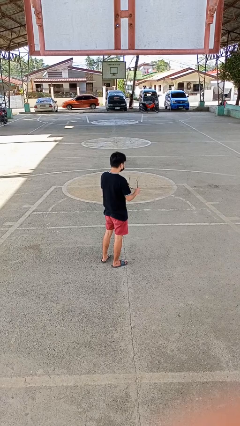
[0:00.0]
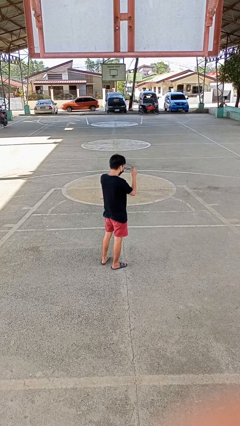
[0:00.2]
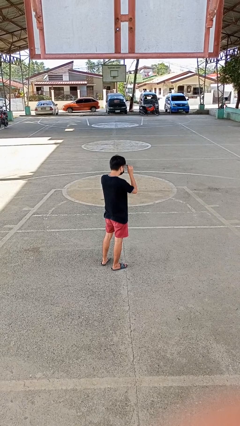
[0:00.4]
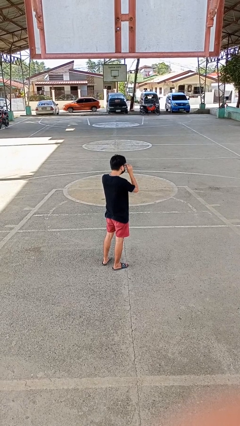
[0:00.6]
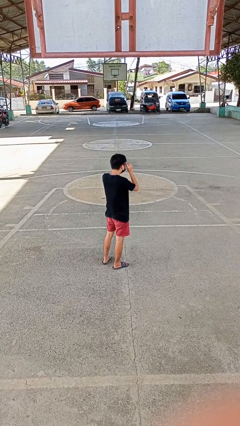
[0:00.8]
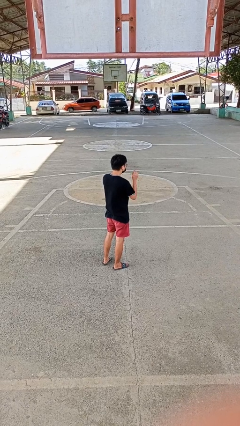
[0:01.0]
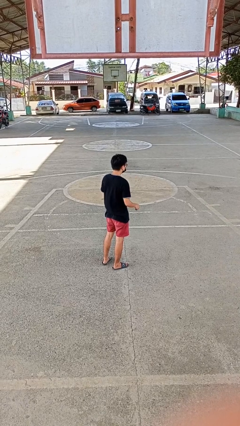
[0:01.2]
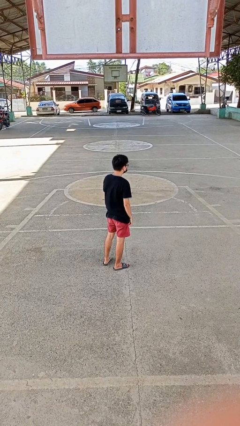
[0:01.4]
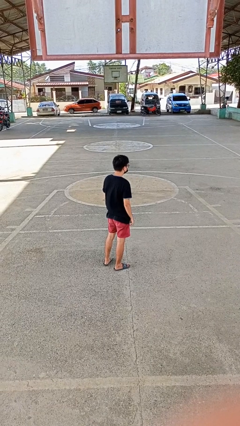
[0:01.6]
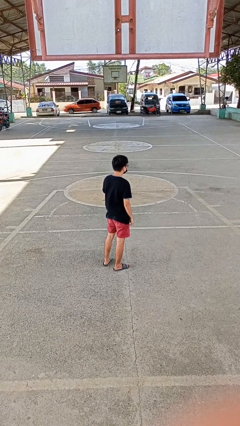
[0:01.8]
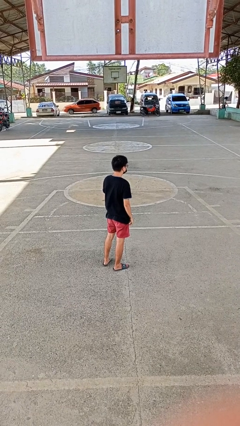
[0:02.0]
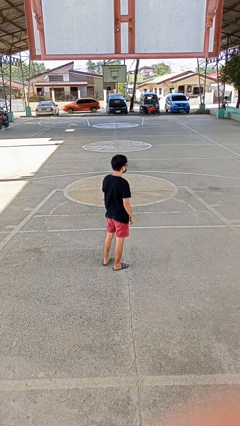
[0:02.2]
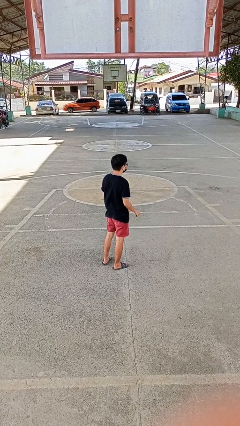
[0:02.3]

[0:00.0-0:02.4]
person puts on glasses

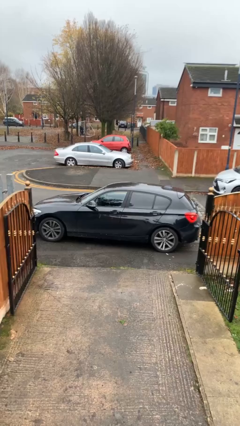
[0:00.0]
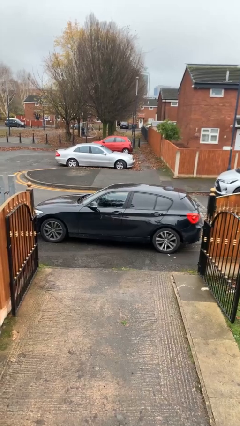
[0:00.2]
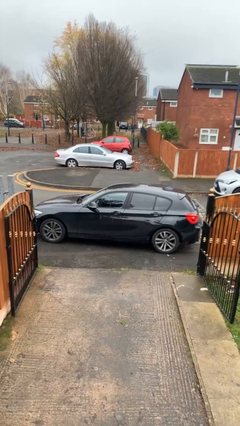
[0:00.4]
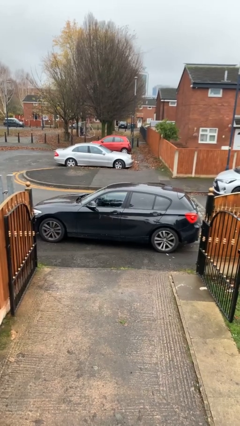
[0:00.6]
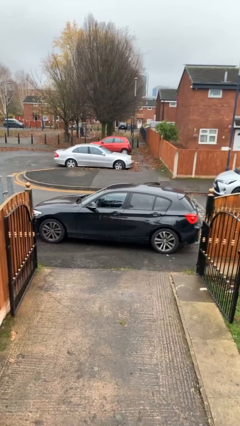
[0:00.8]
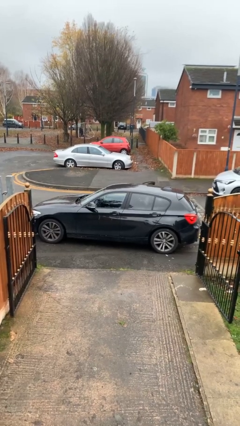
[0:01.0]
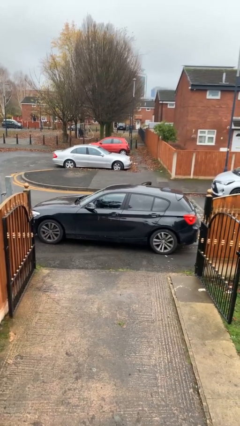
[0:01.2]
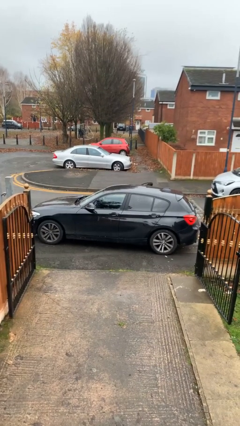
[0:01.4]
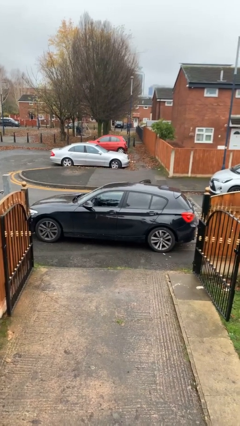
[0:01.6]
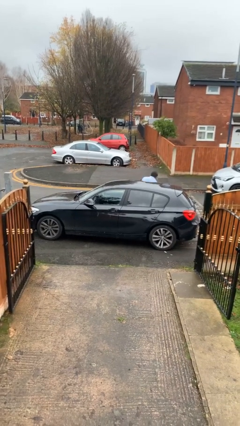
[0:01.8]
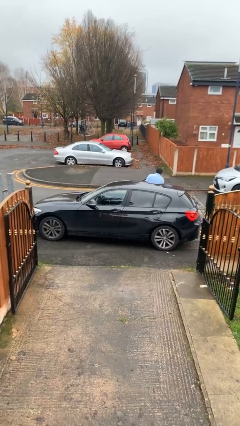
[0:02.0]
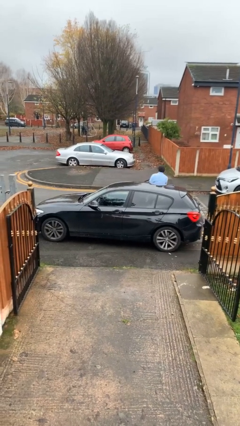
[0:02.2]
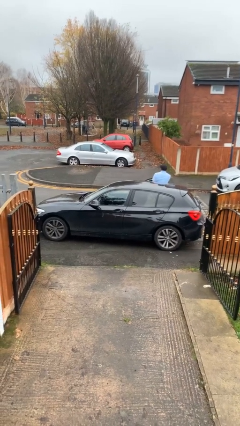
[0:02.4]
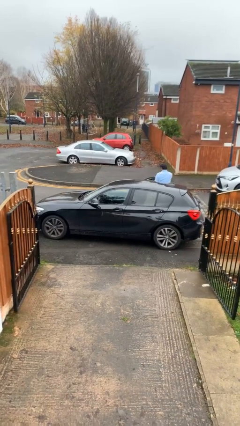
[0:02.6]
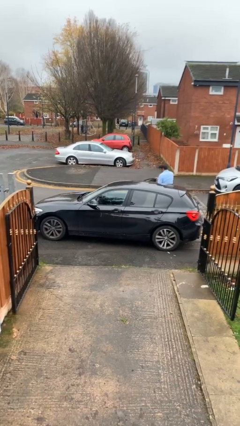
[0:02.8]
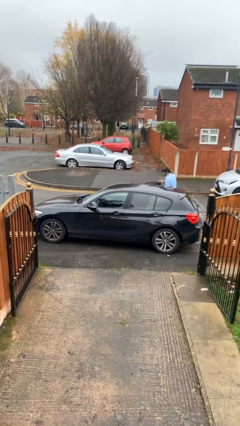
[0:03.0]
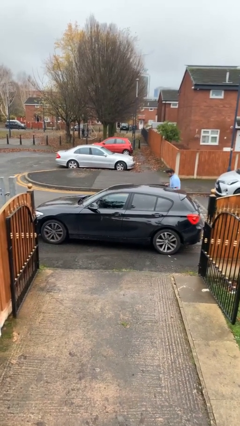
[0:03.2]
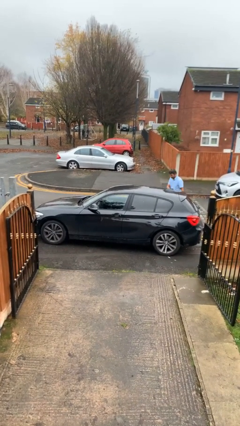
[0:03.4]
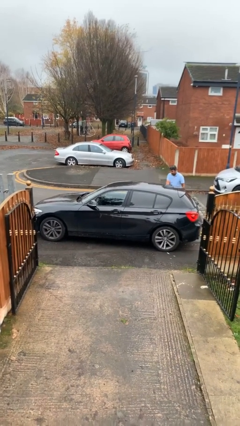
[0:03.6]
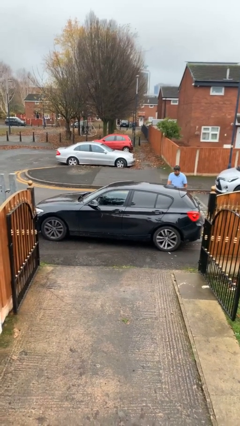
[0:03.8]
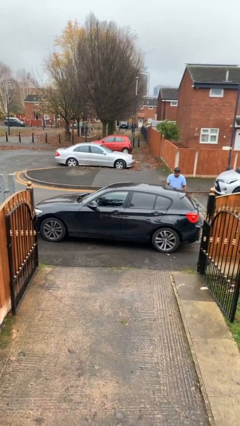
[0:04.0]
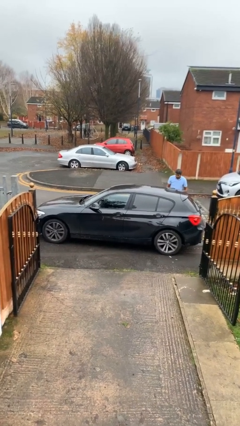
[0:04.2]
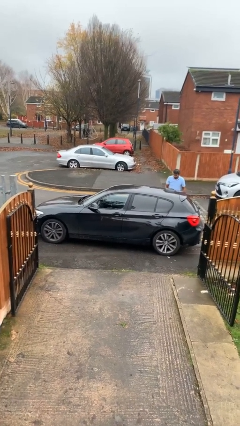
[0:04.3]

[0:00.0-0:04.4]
car drops off person

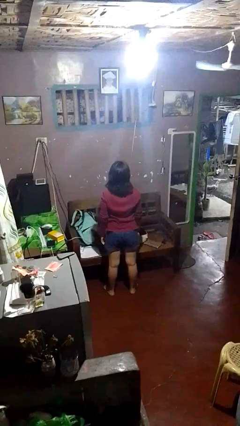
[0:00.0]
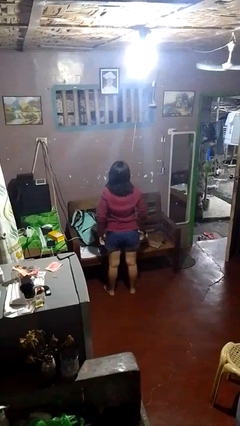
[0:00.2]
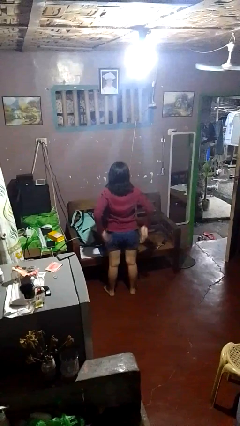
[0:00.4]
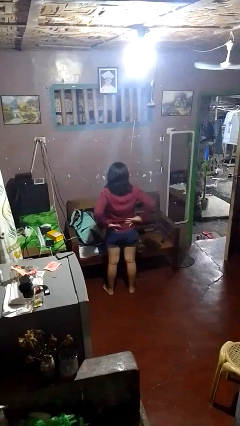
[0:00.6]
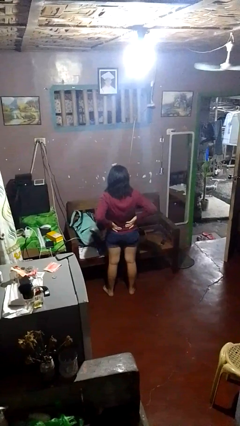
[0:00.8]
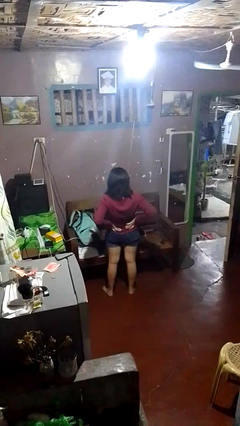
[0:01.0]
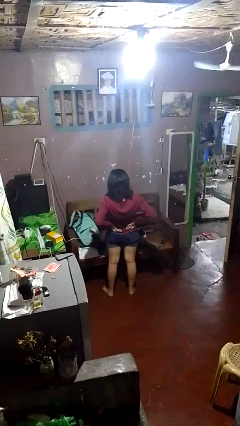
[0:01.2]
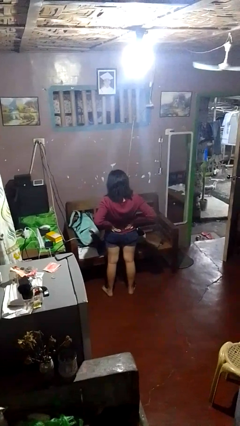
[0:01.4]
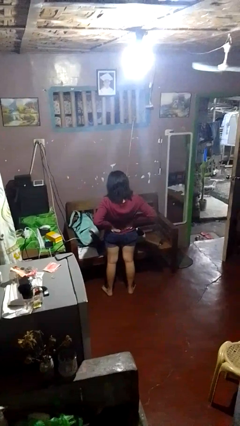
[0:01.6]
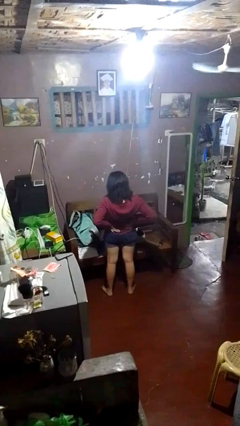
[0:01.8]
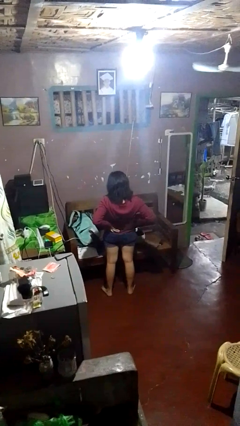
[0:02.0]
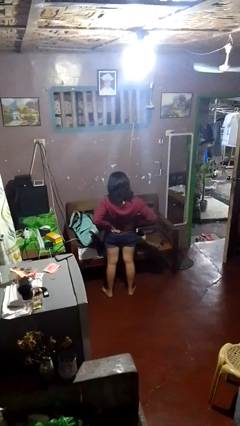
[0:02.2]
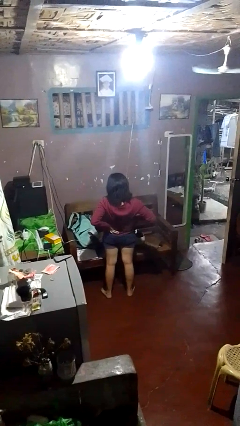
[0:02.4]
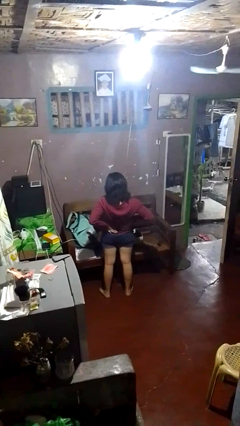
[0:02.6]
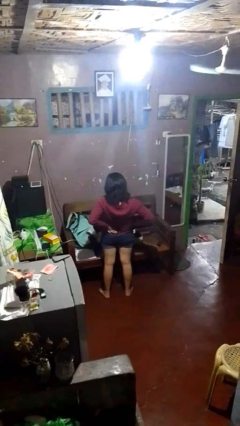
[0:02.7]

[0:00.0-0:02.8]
person stretches back

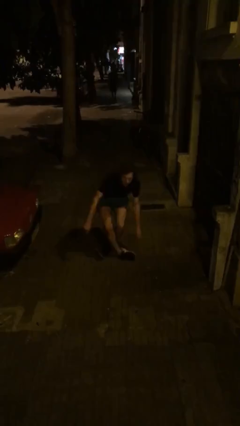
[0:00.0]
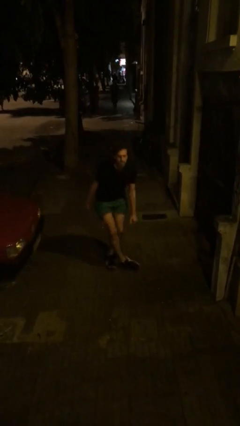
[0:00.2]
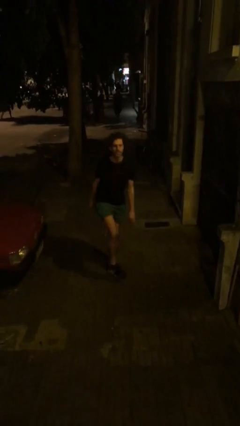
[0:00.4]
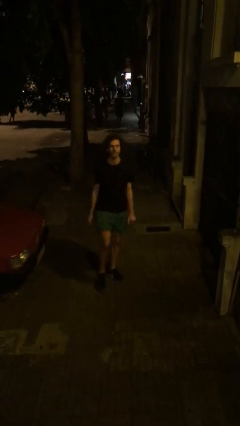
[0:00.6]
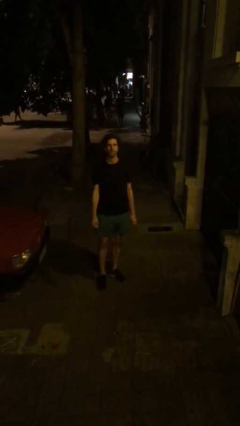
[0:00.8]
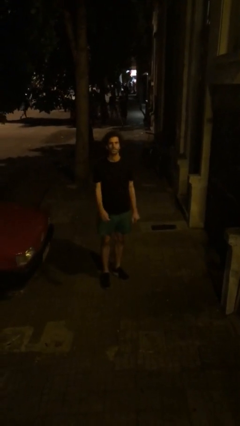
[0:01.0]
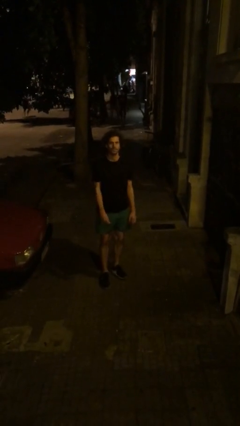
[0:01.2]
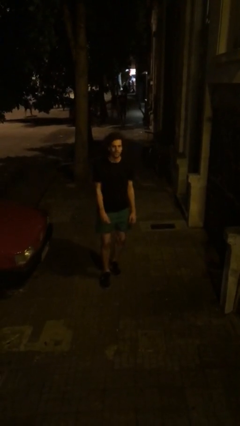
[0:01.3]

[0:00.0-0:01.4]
person stands up

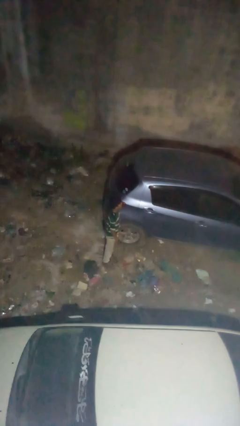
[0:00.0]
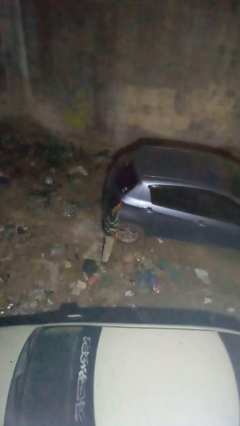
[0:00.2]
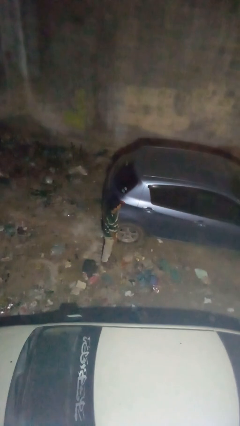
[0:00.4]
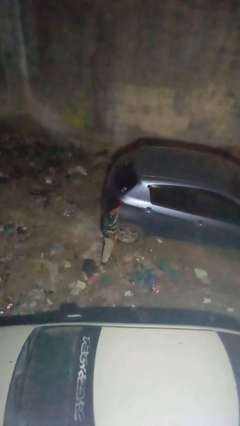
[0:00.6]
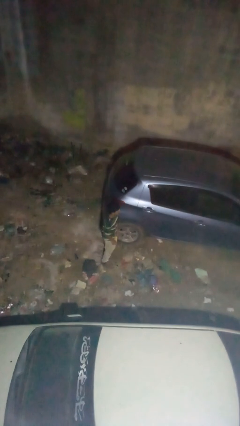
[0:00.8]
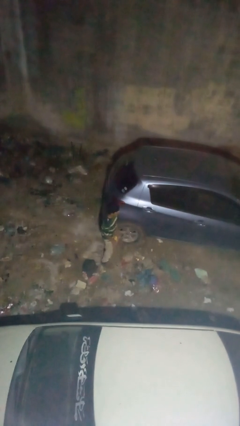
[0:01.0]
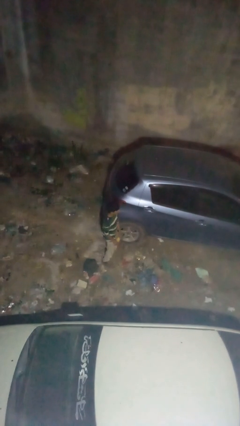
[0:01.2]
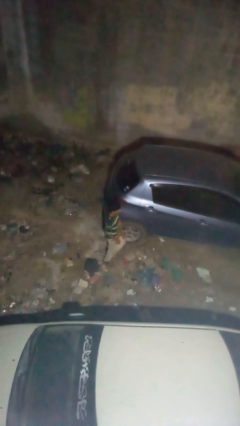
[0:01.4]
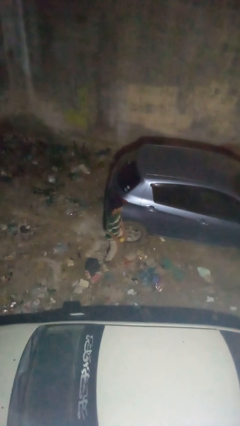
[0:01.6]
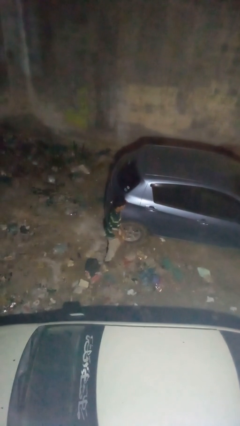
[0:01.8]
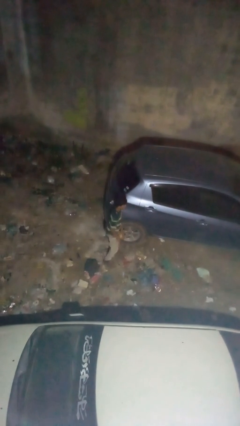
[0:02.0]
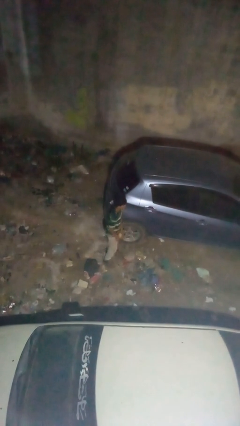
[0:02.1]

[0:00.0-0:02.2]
person kicks car tires

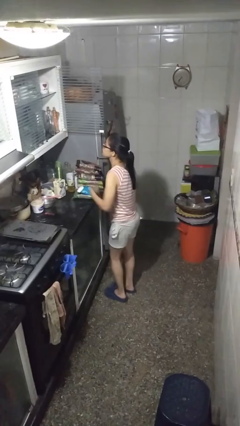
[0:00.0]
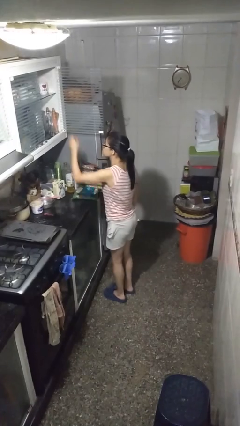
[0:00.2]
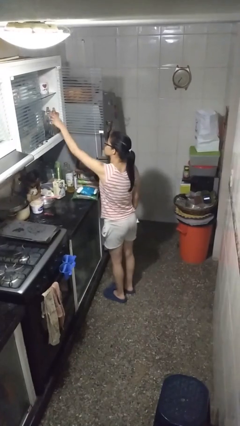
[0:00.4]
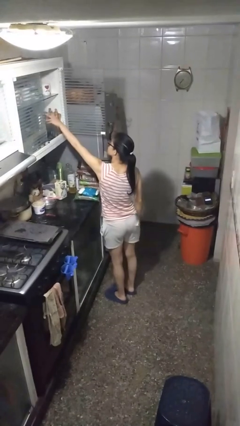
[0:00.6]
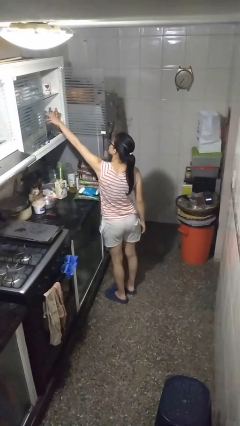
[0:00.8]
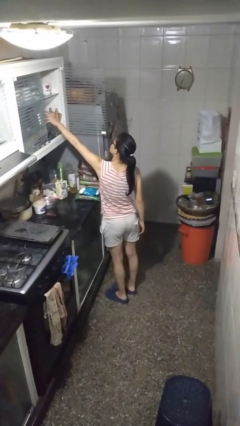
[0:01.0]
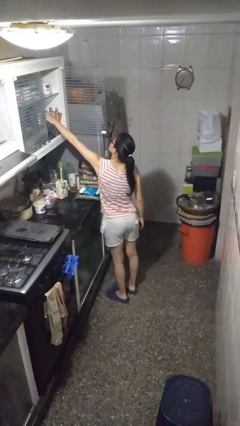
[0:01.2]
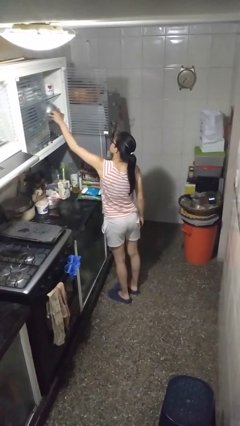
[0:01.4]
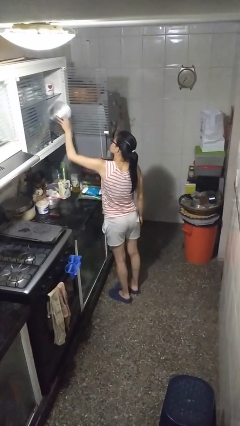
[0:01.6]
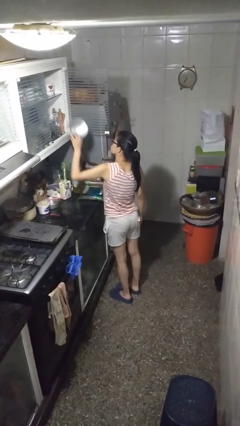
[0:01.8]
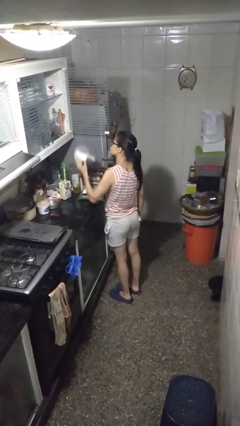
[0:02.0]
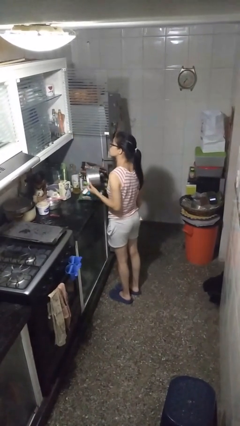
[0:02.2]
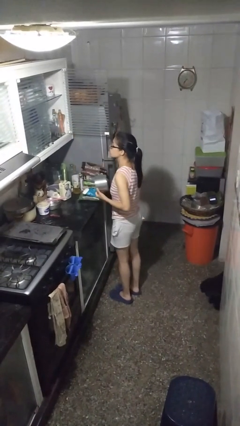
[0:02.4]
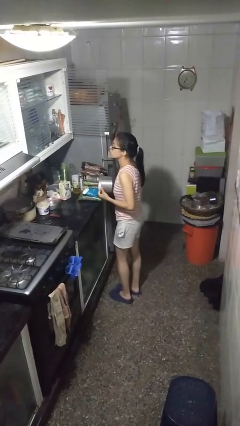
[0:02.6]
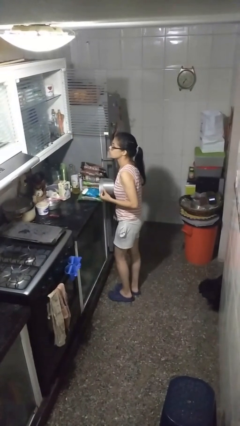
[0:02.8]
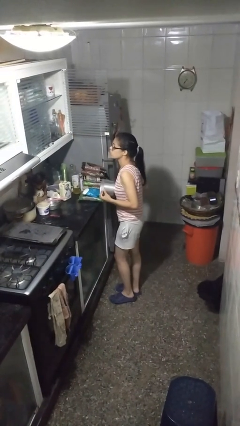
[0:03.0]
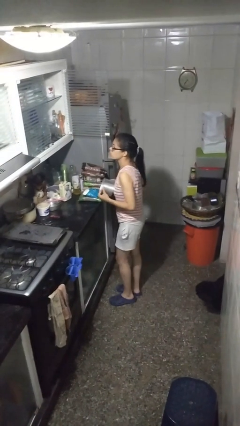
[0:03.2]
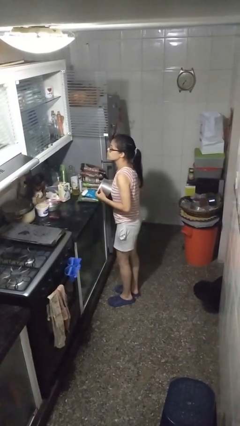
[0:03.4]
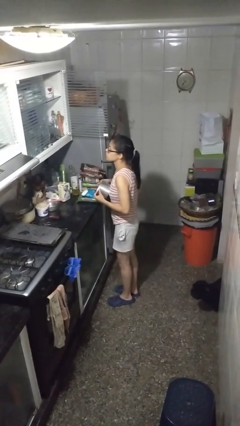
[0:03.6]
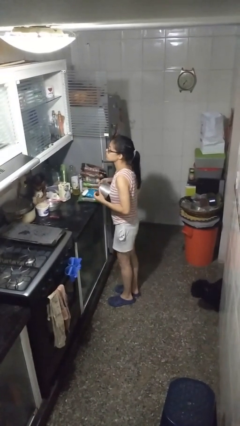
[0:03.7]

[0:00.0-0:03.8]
person picks up object from cabinet

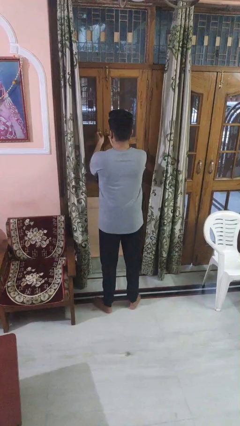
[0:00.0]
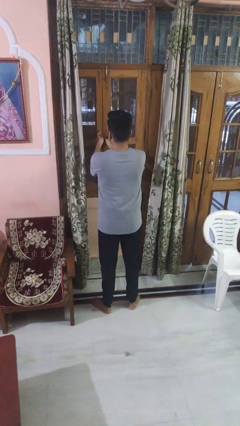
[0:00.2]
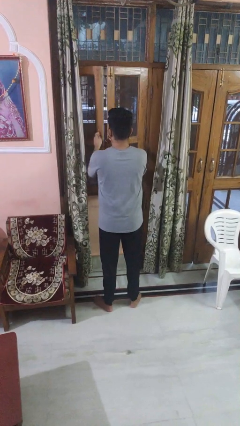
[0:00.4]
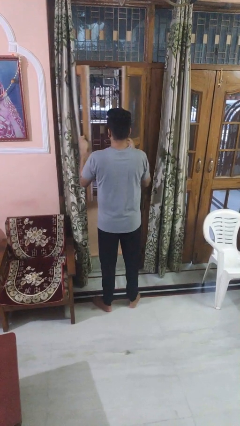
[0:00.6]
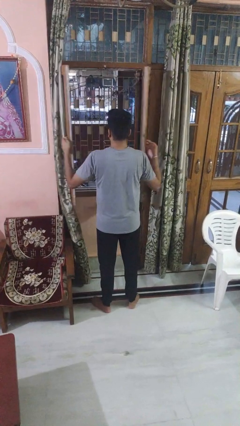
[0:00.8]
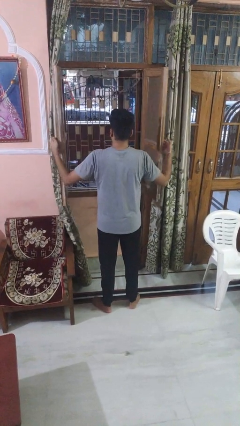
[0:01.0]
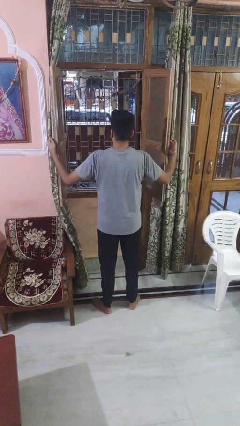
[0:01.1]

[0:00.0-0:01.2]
person opens home window
